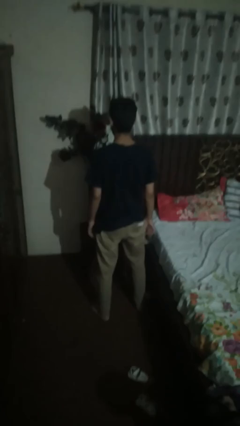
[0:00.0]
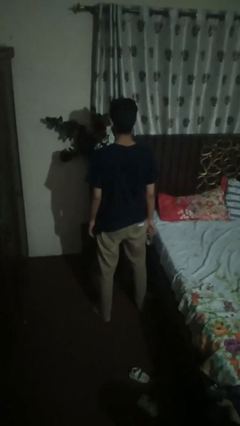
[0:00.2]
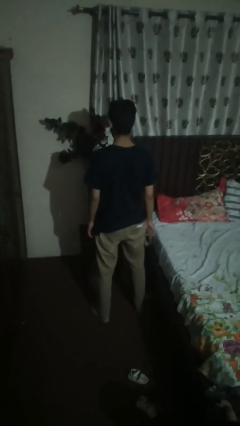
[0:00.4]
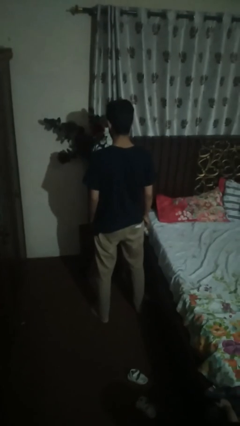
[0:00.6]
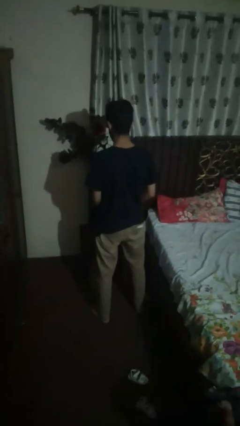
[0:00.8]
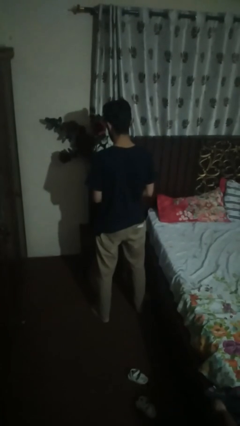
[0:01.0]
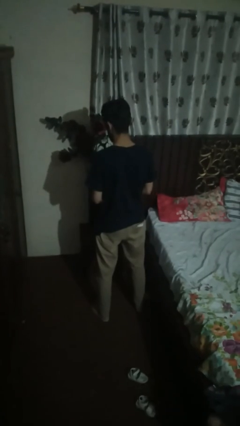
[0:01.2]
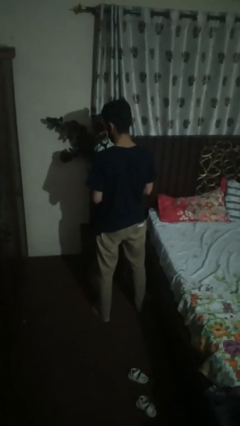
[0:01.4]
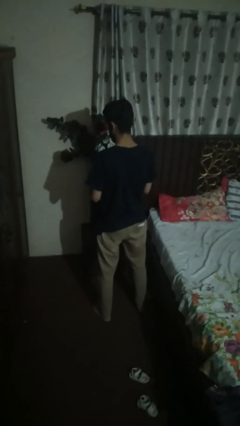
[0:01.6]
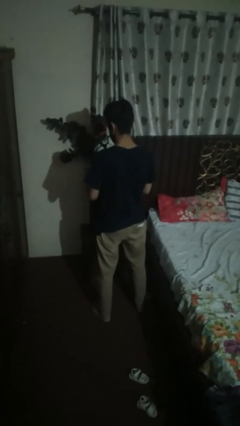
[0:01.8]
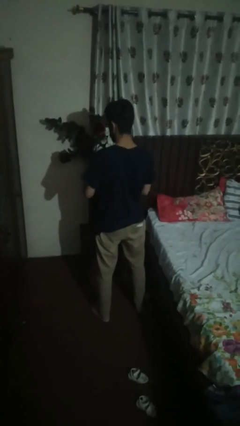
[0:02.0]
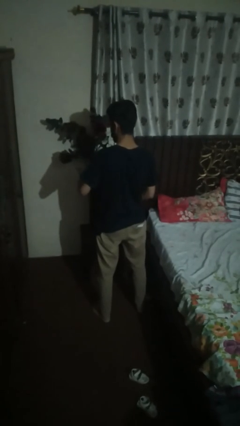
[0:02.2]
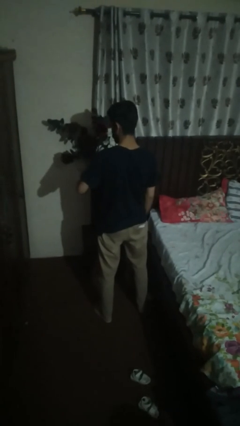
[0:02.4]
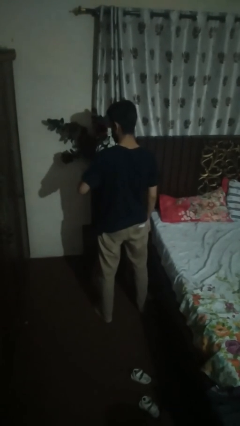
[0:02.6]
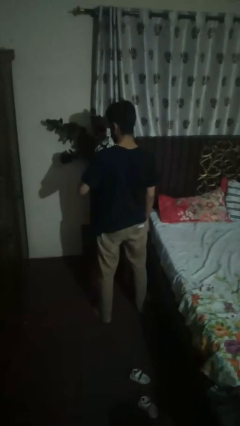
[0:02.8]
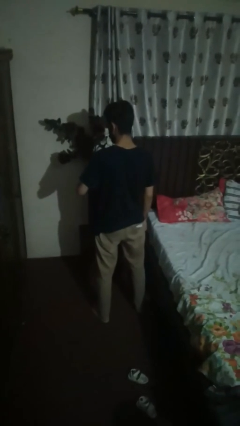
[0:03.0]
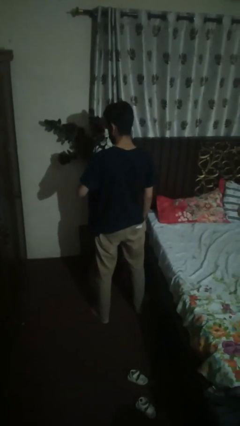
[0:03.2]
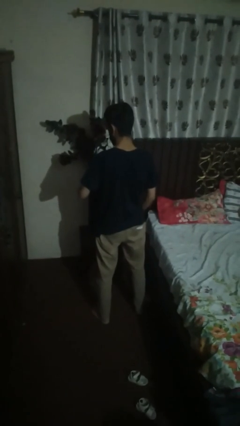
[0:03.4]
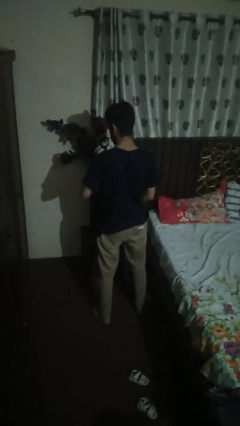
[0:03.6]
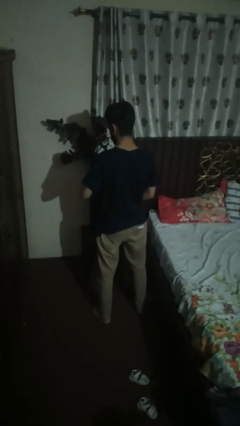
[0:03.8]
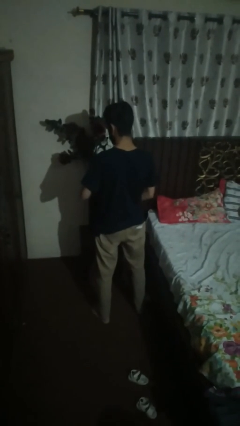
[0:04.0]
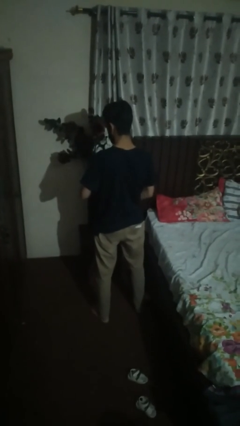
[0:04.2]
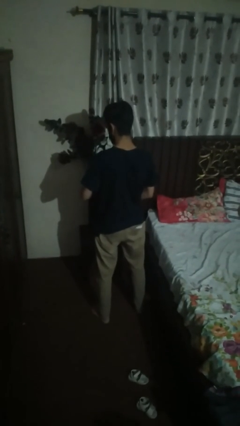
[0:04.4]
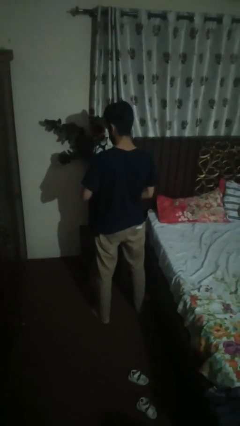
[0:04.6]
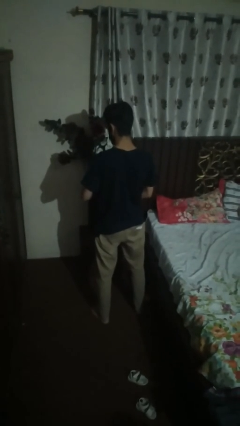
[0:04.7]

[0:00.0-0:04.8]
person puts on wristwatch

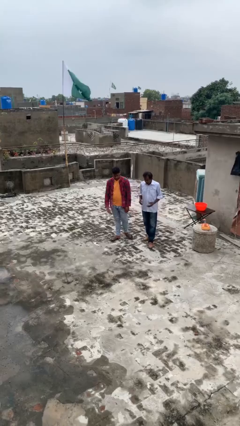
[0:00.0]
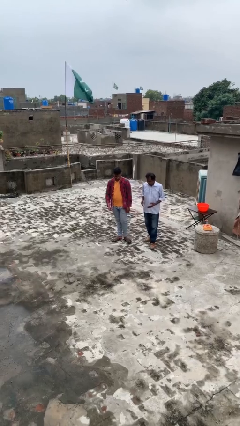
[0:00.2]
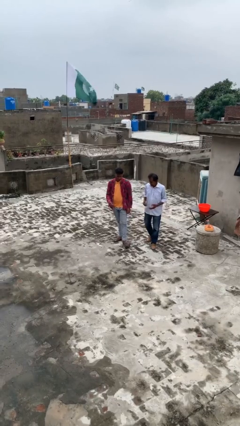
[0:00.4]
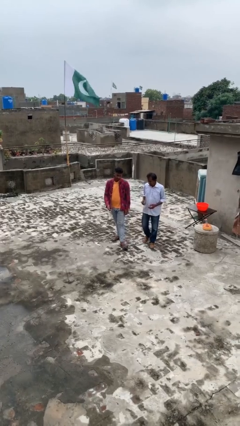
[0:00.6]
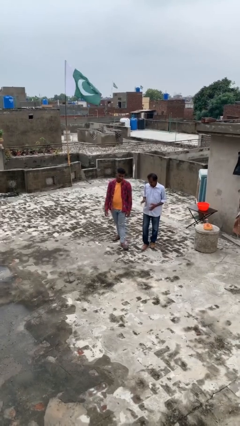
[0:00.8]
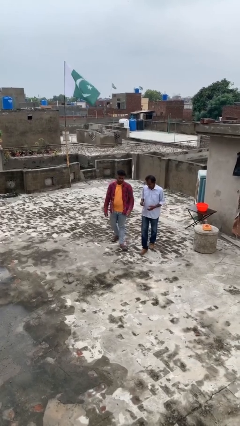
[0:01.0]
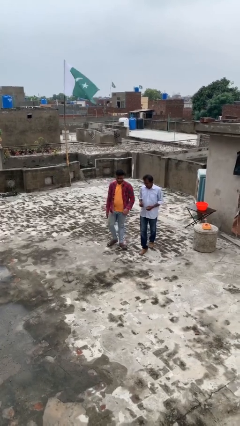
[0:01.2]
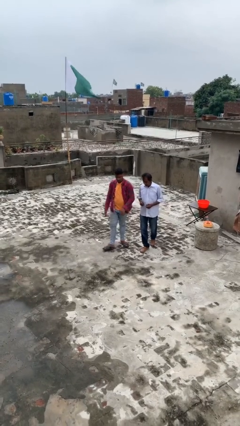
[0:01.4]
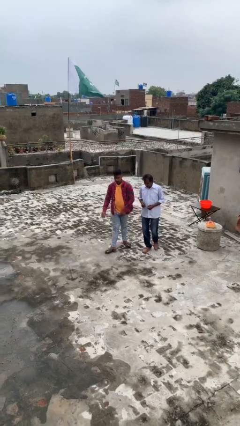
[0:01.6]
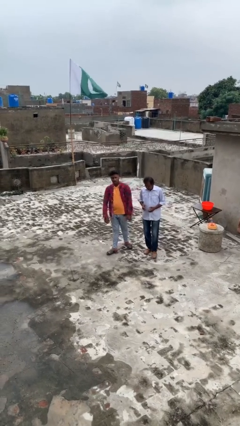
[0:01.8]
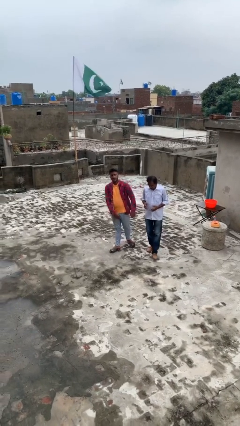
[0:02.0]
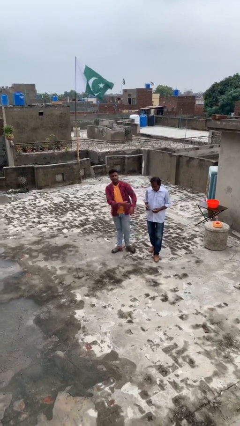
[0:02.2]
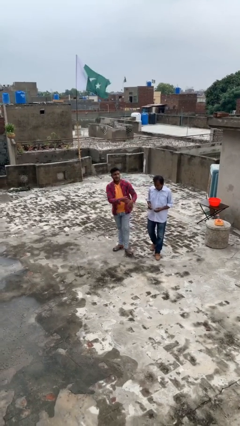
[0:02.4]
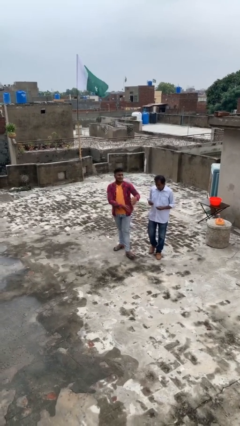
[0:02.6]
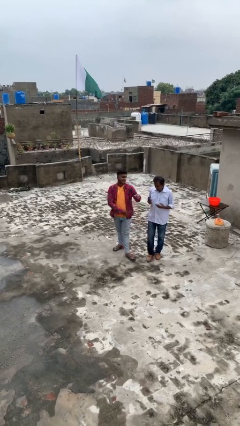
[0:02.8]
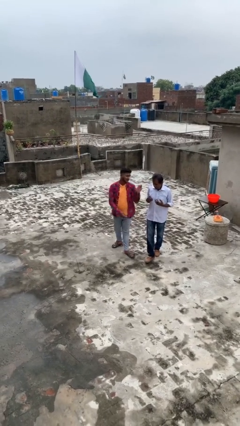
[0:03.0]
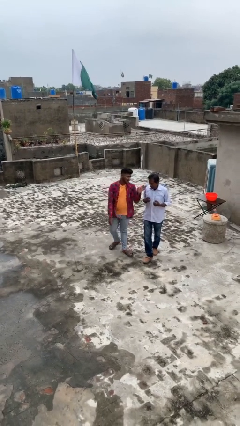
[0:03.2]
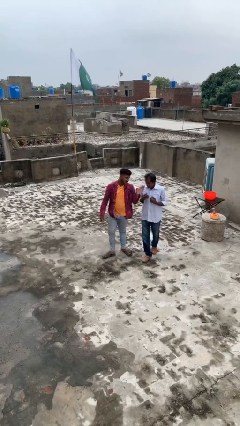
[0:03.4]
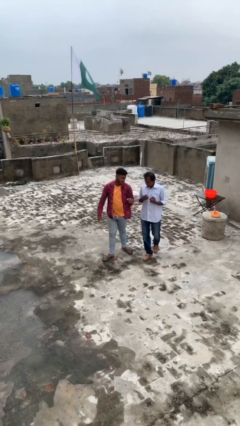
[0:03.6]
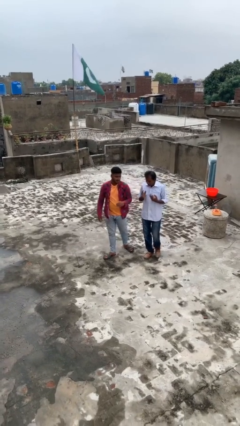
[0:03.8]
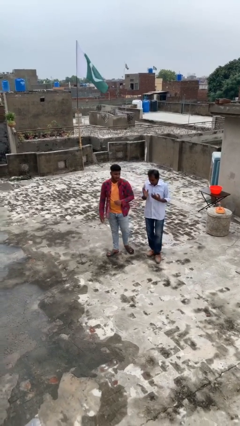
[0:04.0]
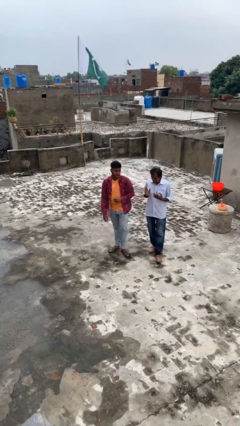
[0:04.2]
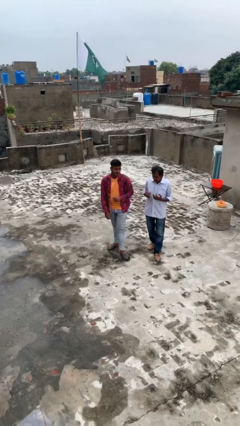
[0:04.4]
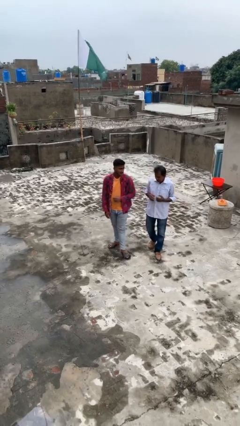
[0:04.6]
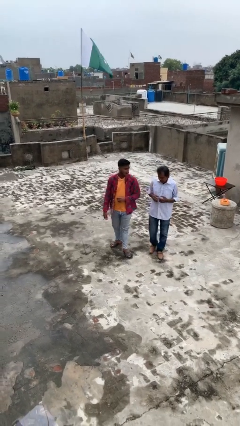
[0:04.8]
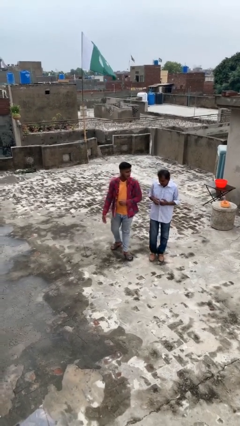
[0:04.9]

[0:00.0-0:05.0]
person talks to person

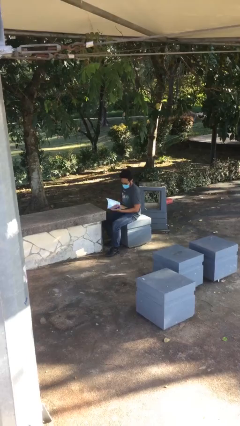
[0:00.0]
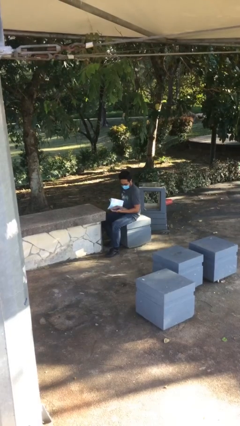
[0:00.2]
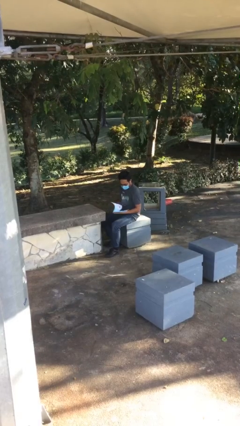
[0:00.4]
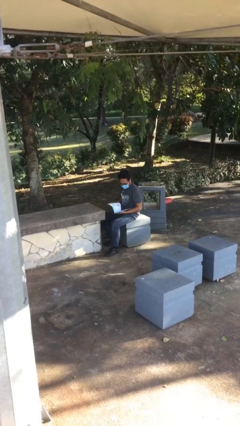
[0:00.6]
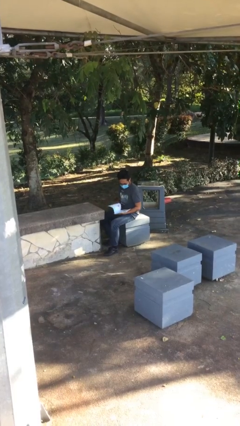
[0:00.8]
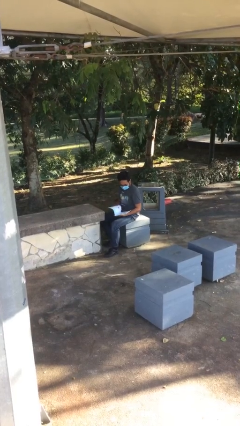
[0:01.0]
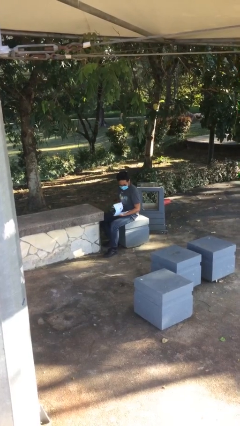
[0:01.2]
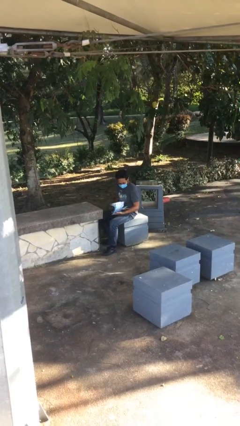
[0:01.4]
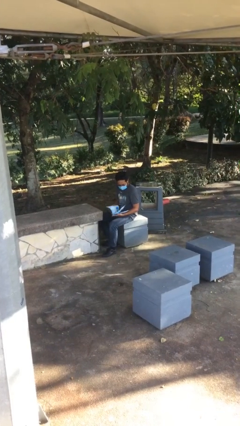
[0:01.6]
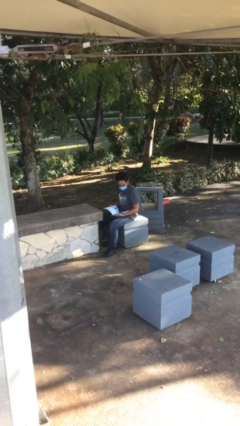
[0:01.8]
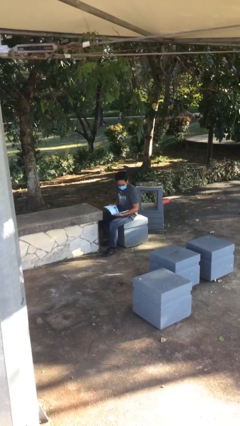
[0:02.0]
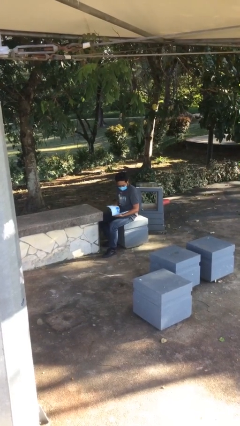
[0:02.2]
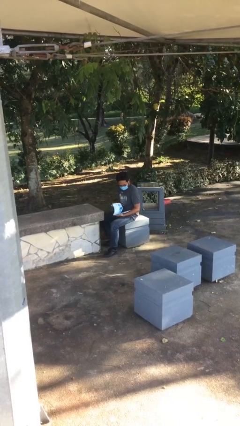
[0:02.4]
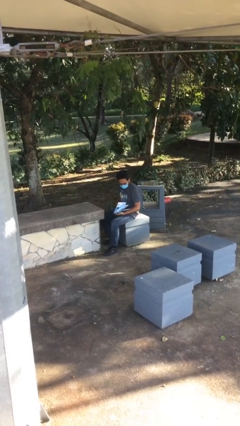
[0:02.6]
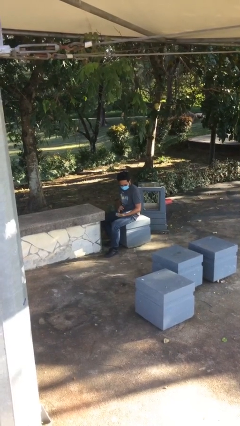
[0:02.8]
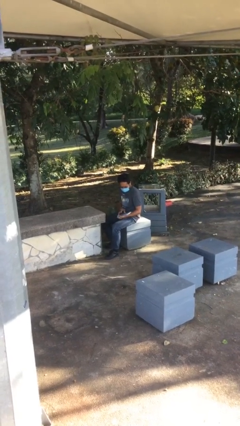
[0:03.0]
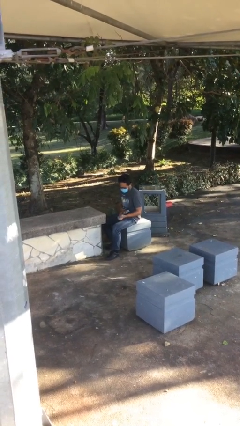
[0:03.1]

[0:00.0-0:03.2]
person reads document

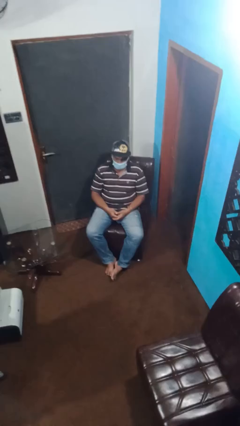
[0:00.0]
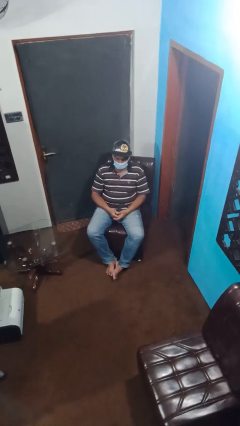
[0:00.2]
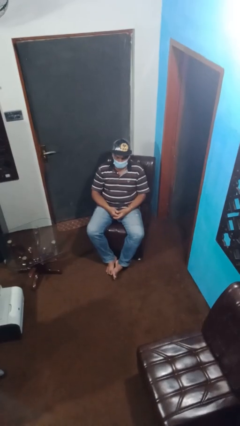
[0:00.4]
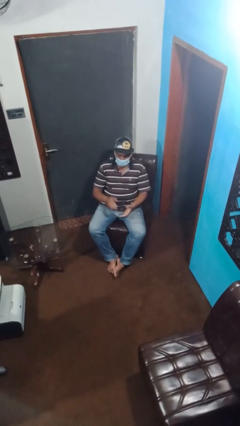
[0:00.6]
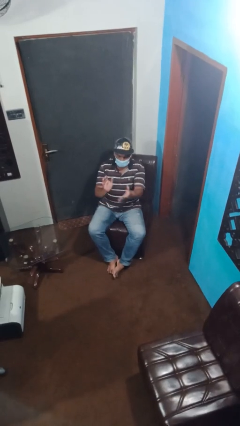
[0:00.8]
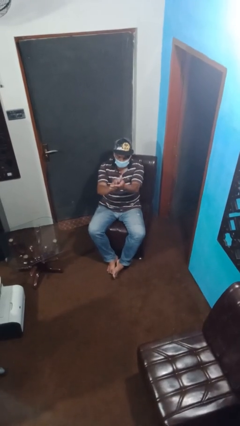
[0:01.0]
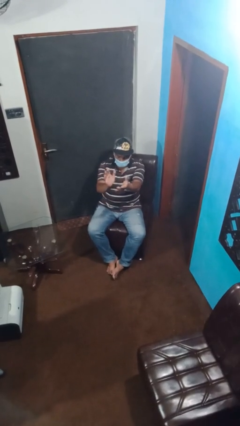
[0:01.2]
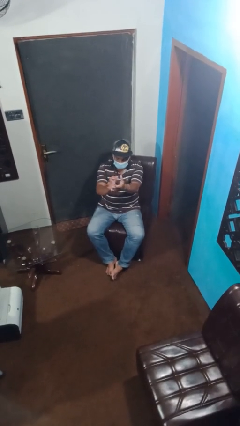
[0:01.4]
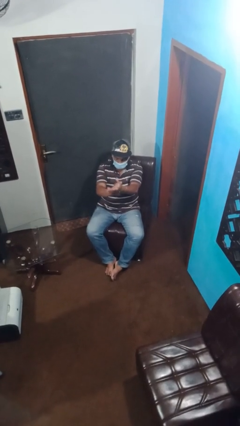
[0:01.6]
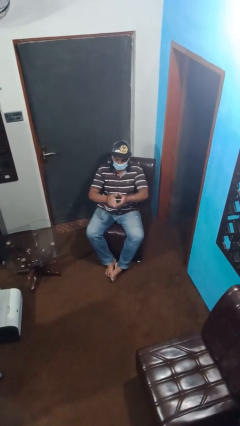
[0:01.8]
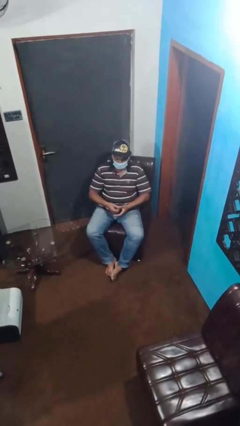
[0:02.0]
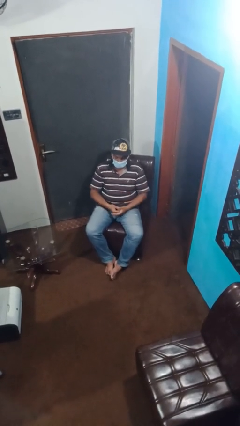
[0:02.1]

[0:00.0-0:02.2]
person claps hands

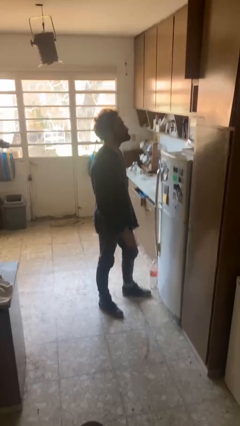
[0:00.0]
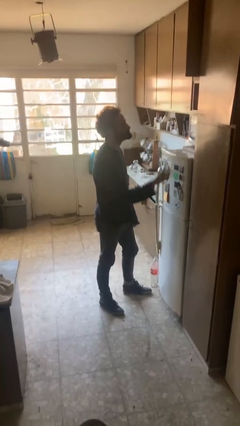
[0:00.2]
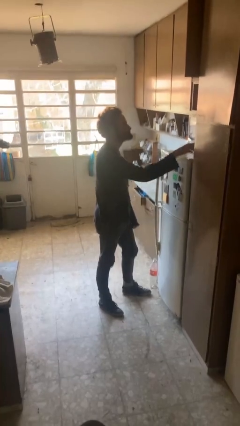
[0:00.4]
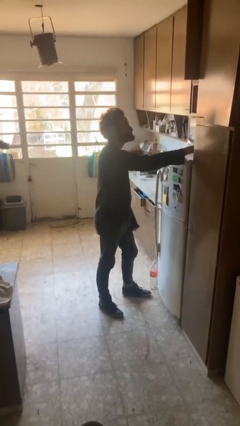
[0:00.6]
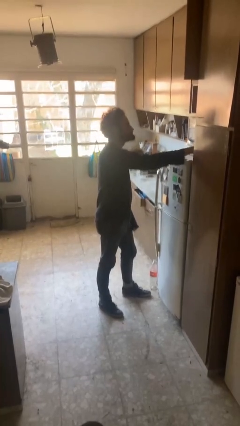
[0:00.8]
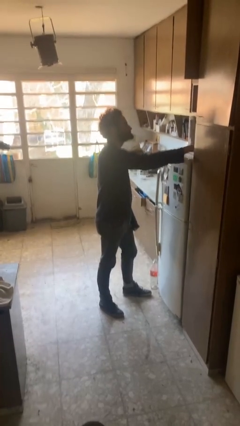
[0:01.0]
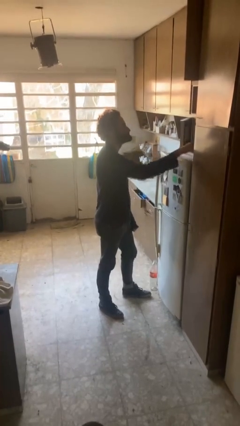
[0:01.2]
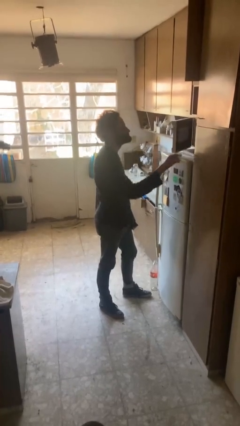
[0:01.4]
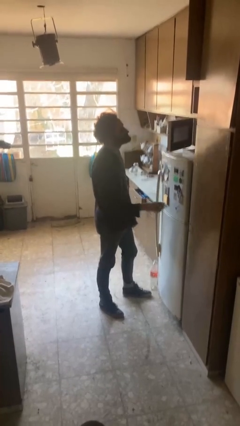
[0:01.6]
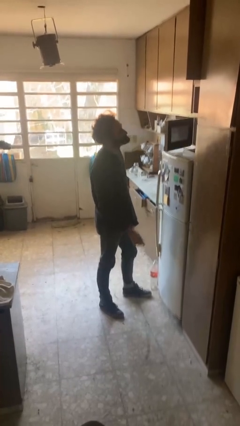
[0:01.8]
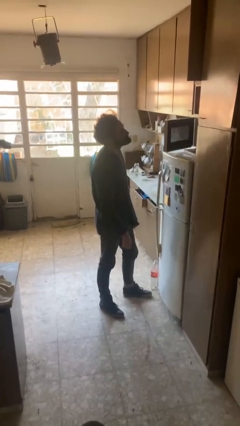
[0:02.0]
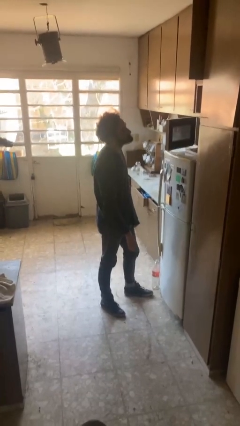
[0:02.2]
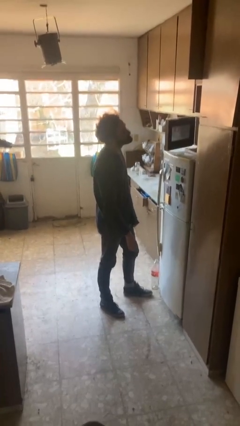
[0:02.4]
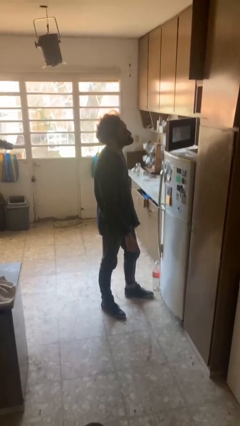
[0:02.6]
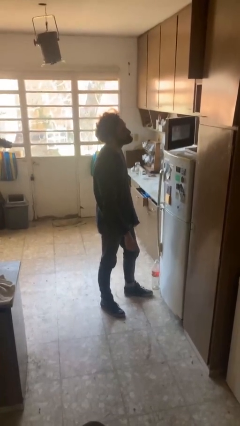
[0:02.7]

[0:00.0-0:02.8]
person opens microwave
